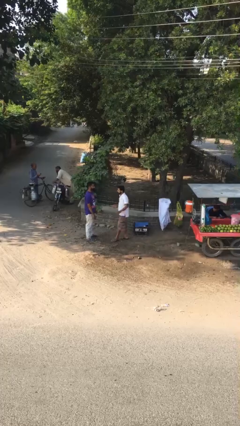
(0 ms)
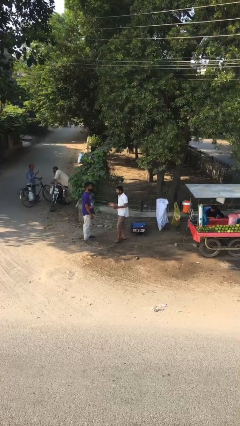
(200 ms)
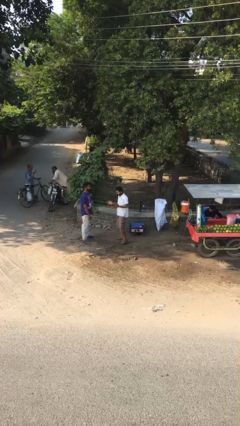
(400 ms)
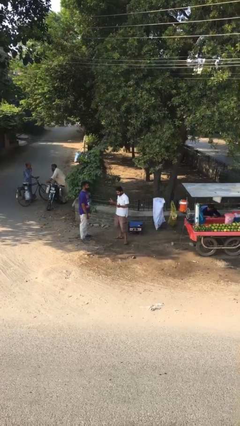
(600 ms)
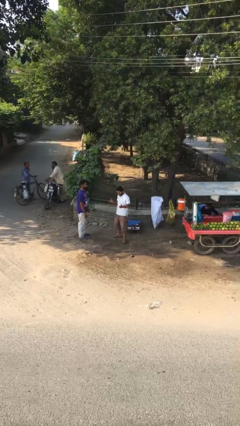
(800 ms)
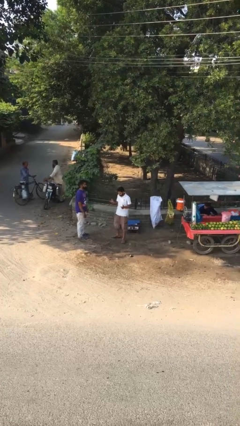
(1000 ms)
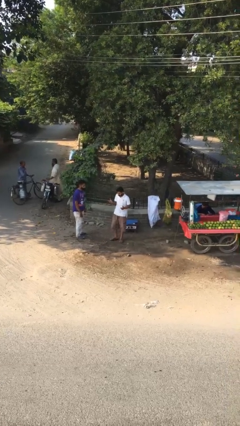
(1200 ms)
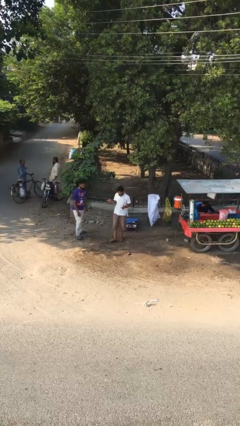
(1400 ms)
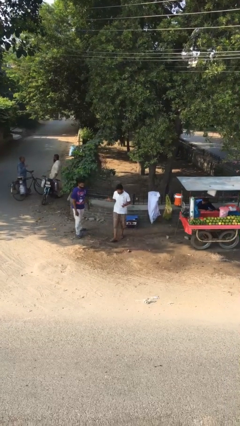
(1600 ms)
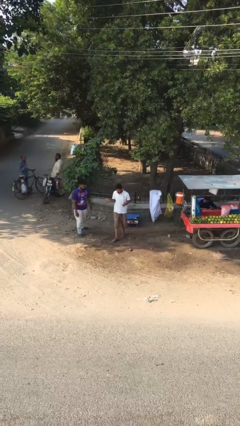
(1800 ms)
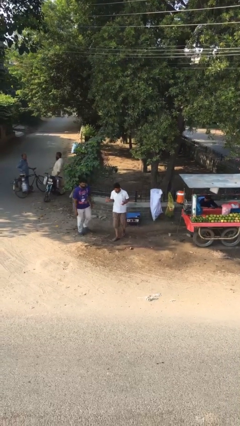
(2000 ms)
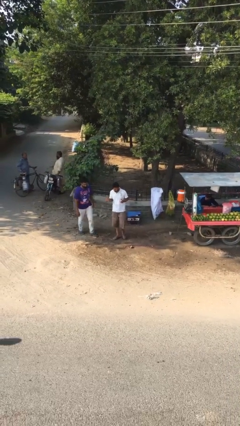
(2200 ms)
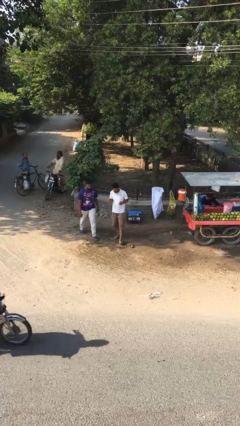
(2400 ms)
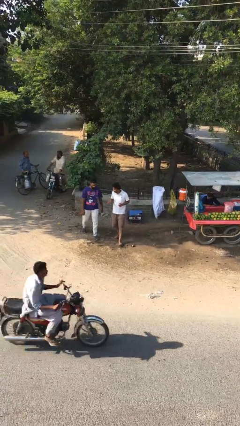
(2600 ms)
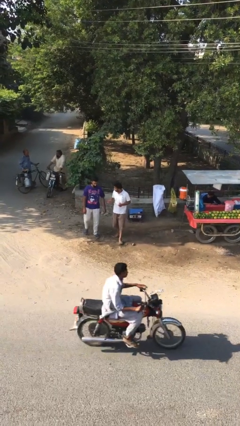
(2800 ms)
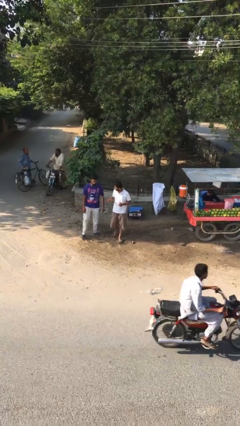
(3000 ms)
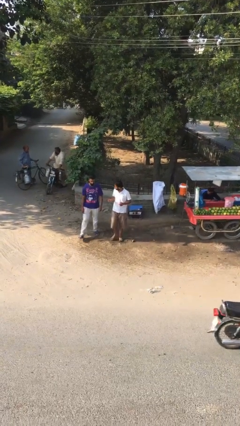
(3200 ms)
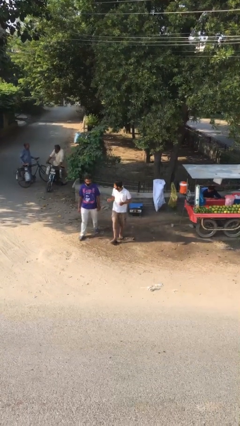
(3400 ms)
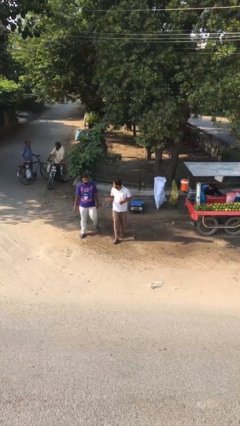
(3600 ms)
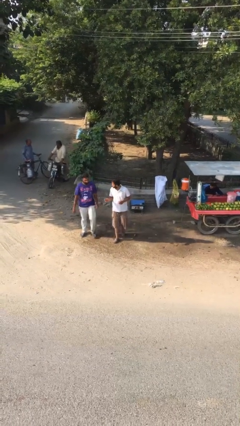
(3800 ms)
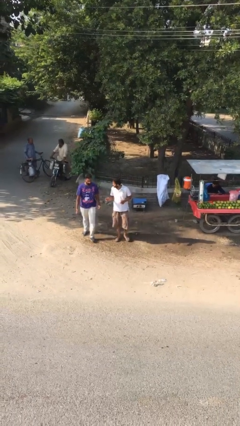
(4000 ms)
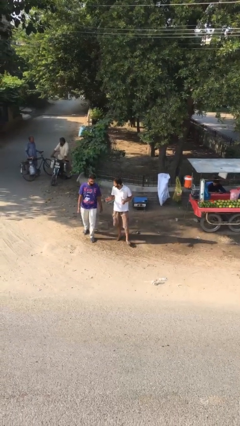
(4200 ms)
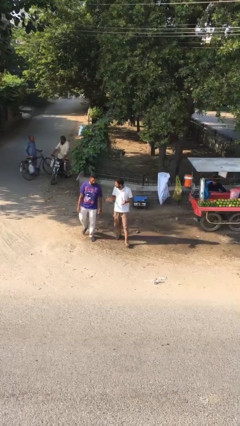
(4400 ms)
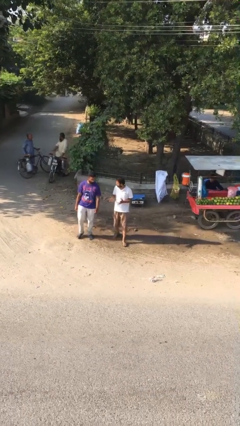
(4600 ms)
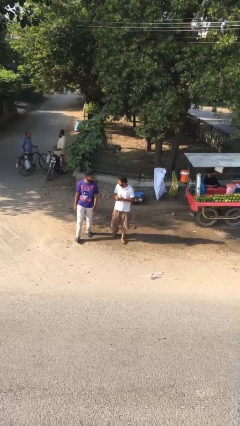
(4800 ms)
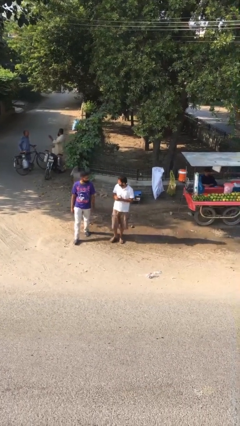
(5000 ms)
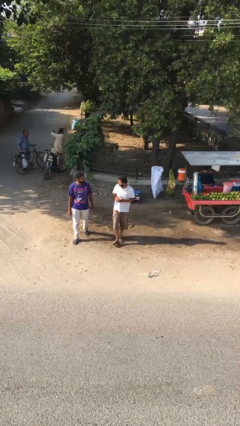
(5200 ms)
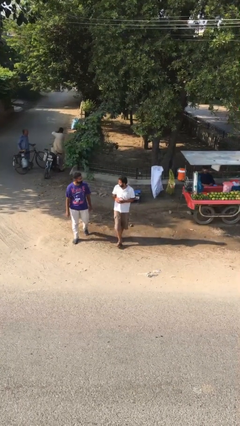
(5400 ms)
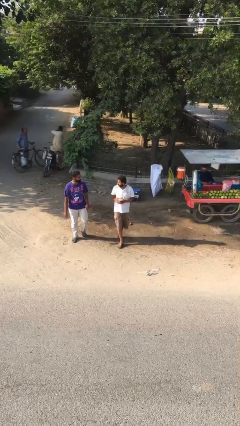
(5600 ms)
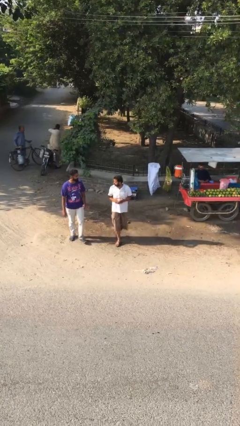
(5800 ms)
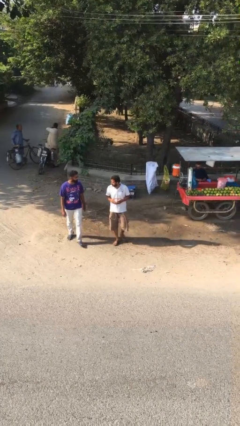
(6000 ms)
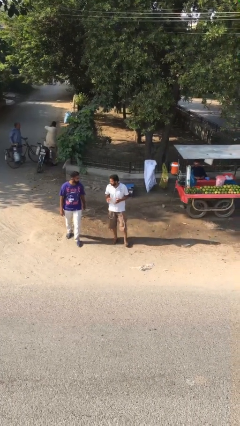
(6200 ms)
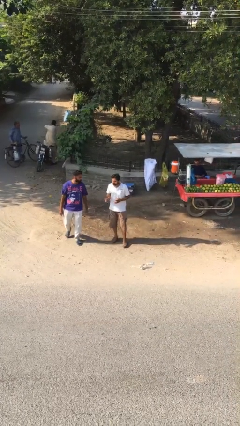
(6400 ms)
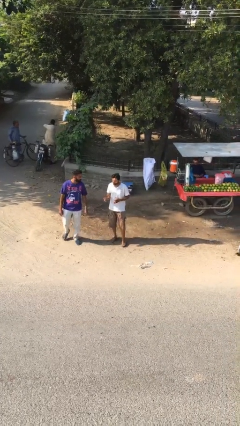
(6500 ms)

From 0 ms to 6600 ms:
person talks to person

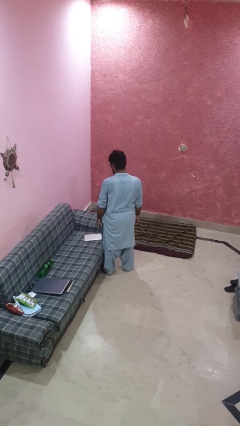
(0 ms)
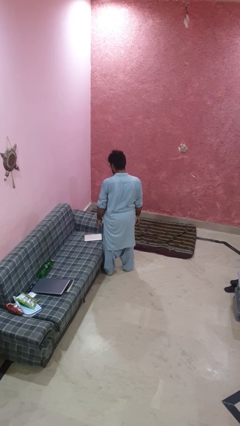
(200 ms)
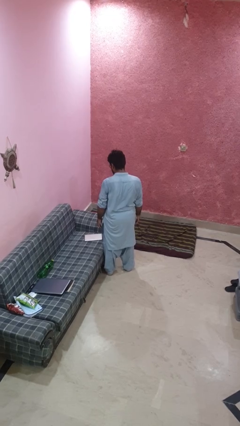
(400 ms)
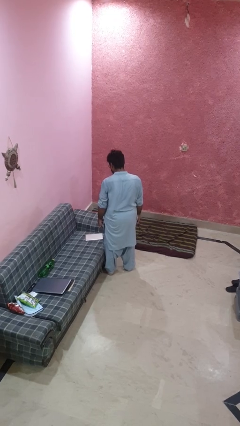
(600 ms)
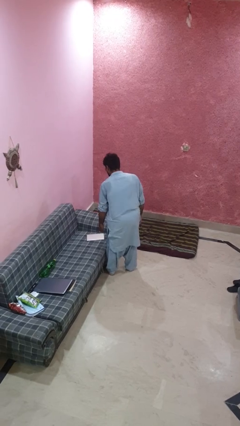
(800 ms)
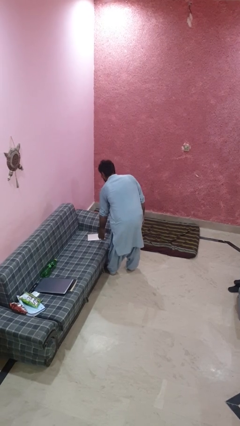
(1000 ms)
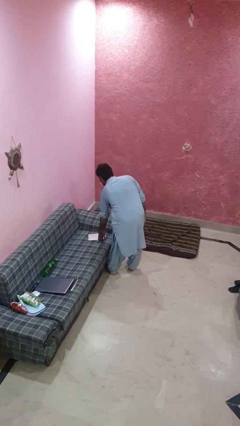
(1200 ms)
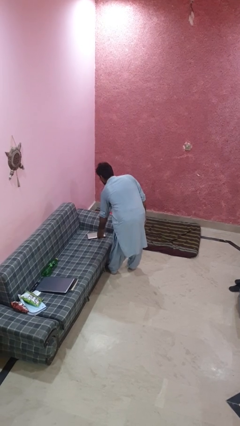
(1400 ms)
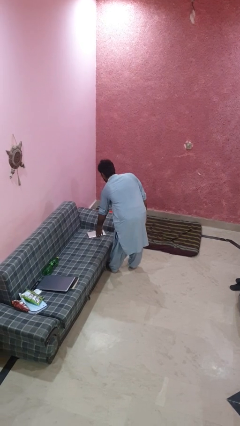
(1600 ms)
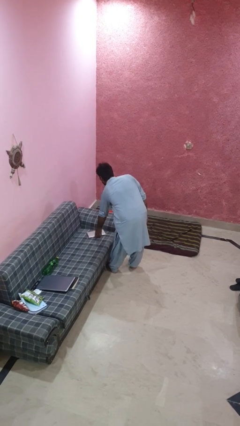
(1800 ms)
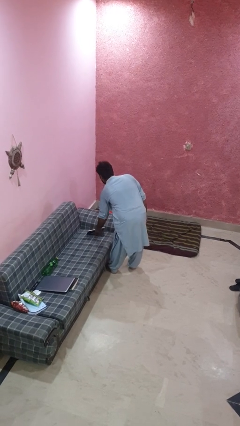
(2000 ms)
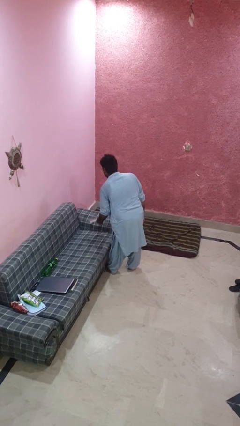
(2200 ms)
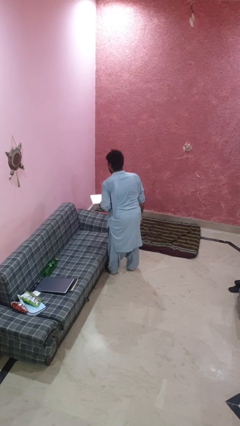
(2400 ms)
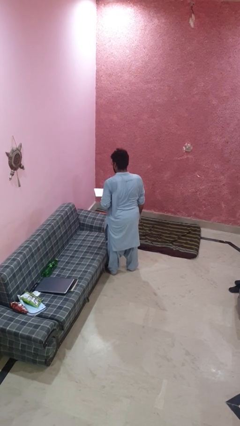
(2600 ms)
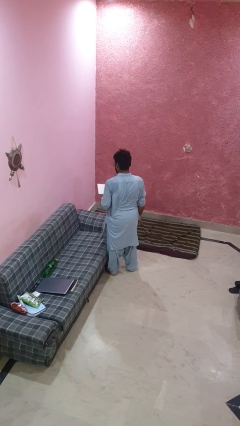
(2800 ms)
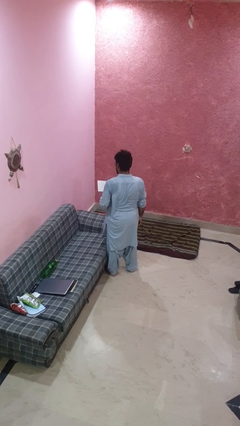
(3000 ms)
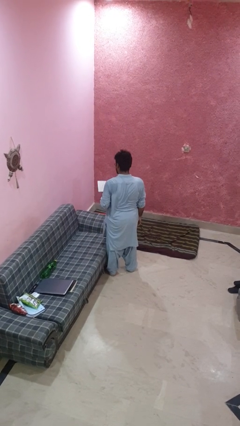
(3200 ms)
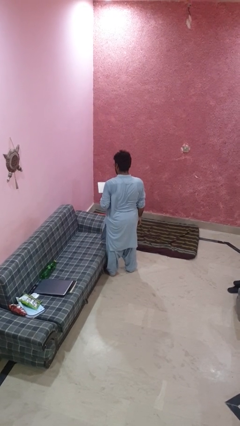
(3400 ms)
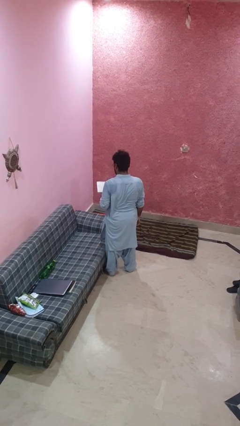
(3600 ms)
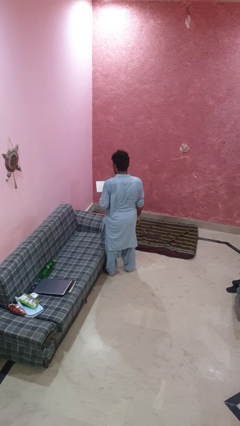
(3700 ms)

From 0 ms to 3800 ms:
person picks up object from couch

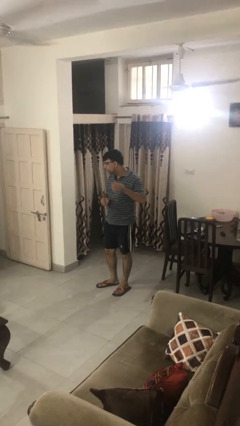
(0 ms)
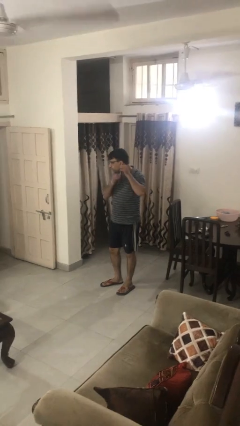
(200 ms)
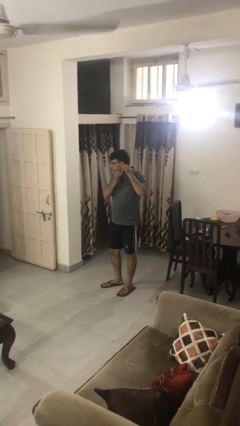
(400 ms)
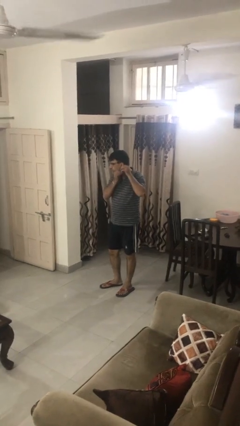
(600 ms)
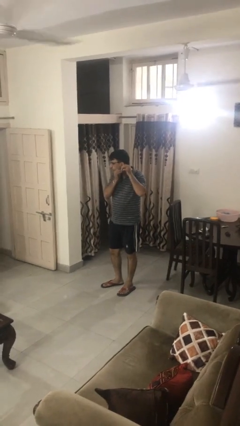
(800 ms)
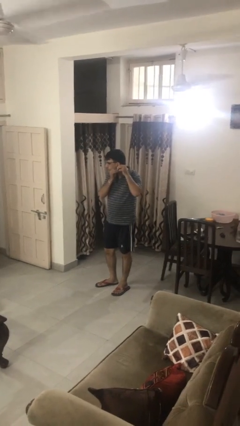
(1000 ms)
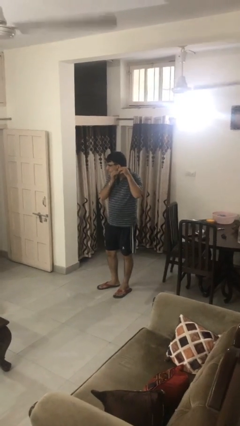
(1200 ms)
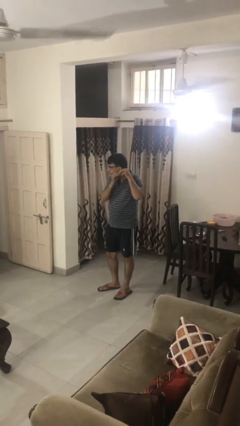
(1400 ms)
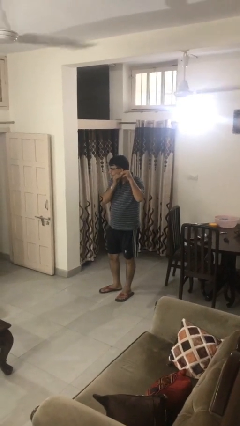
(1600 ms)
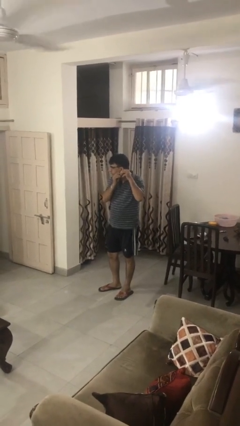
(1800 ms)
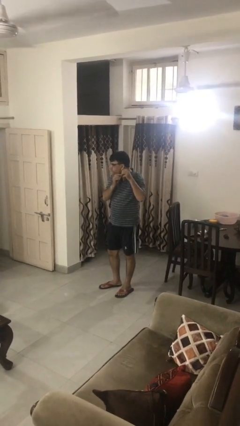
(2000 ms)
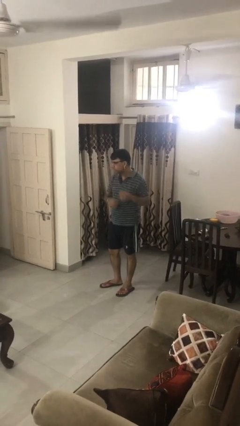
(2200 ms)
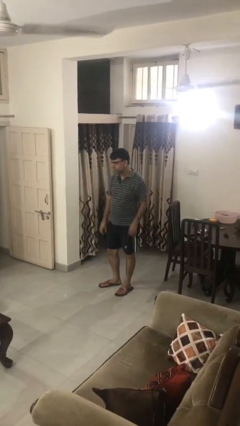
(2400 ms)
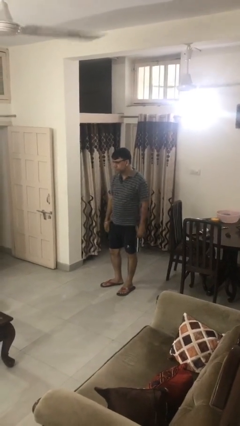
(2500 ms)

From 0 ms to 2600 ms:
person puts on earrings

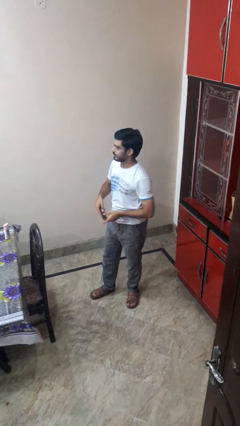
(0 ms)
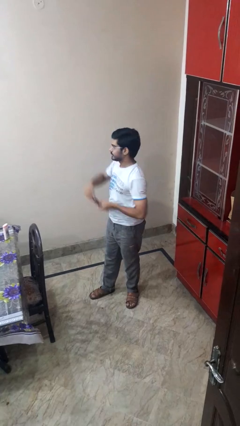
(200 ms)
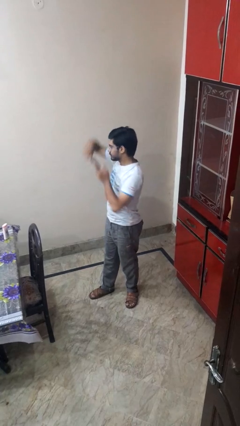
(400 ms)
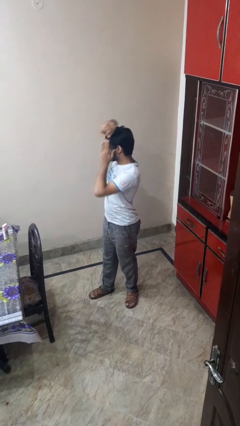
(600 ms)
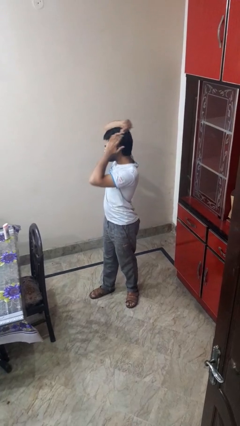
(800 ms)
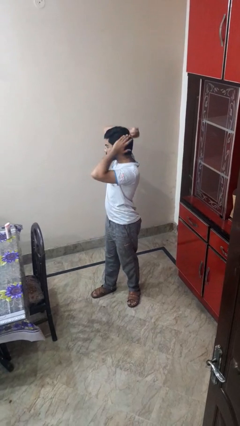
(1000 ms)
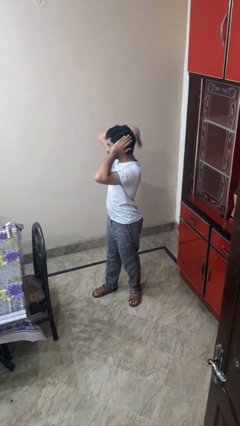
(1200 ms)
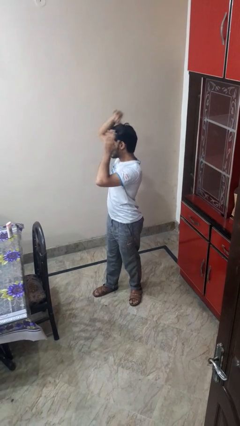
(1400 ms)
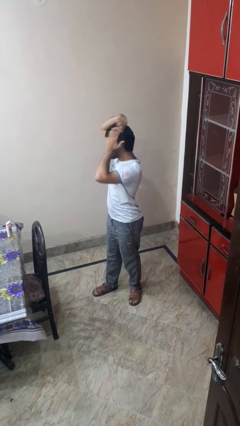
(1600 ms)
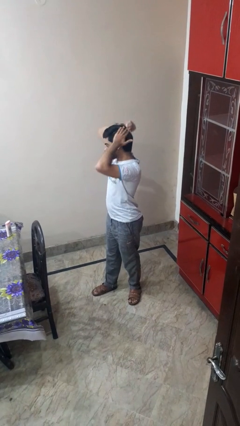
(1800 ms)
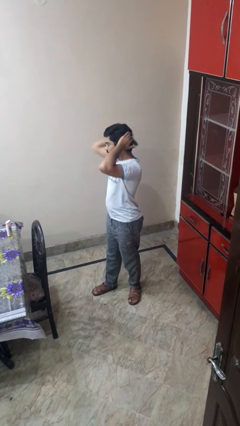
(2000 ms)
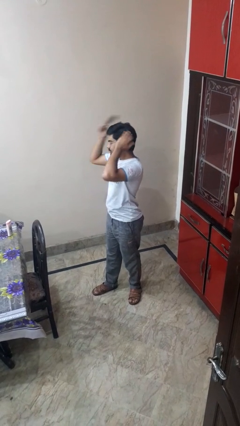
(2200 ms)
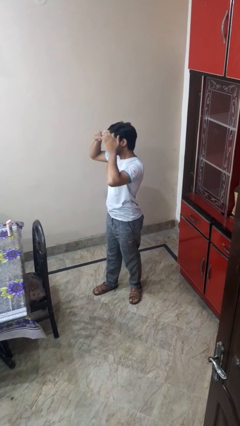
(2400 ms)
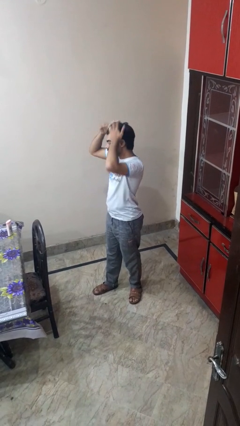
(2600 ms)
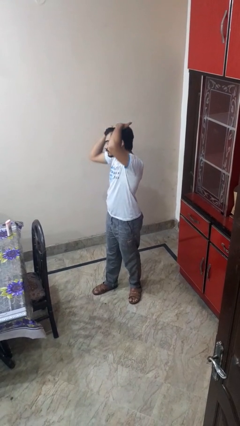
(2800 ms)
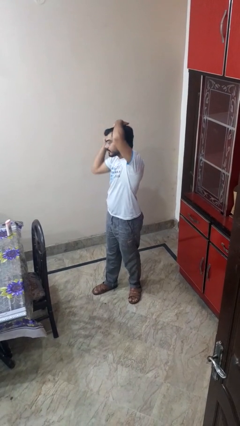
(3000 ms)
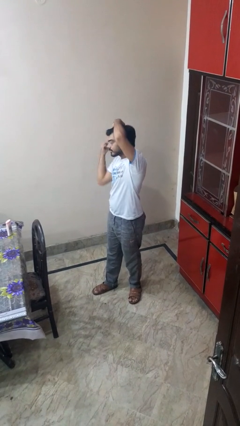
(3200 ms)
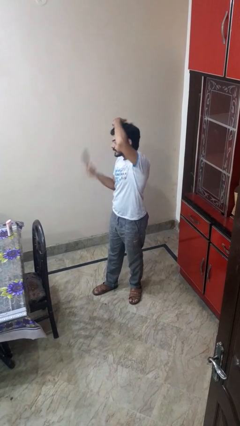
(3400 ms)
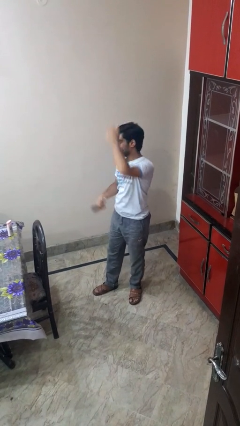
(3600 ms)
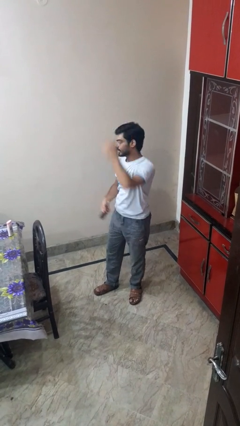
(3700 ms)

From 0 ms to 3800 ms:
person brushes hair

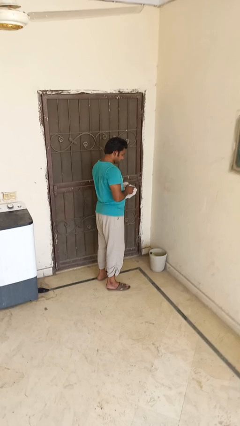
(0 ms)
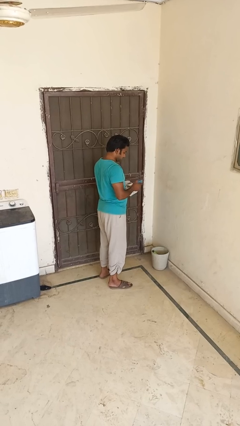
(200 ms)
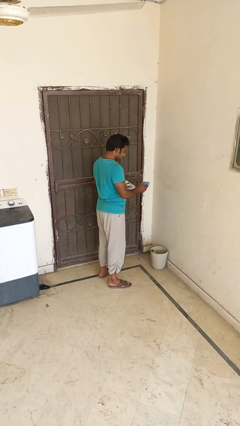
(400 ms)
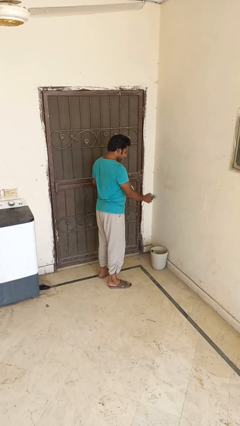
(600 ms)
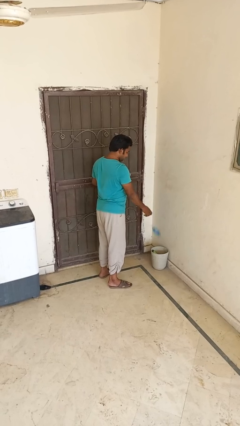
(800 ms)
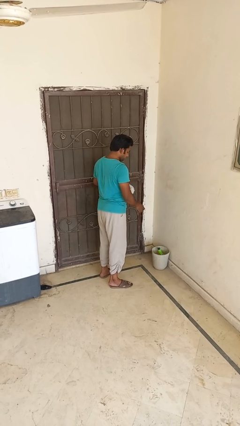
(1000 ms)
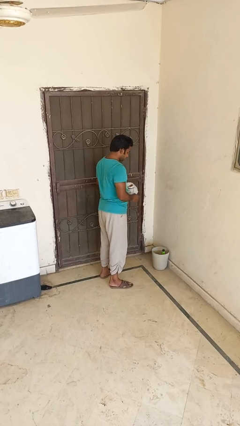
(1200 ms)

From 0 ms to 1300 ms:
person discards trash
